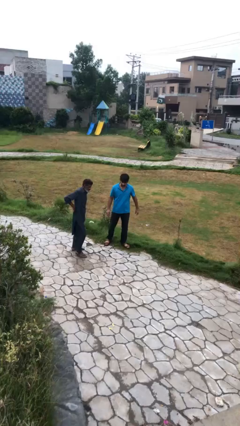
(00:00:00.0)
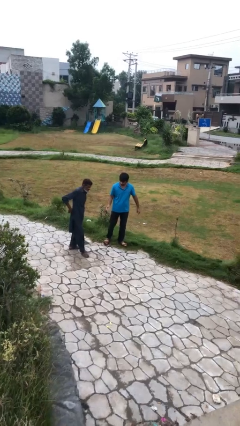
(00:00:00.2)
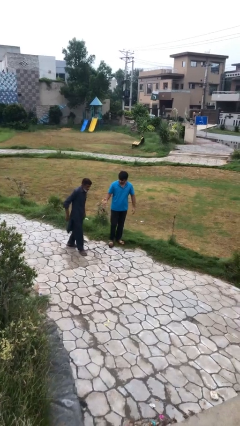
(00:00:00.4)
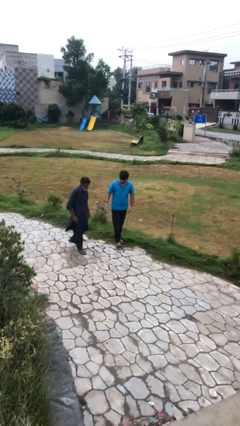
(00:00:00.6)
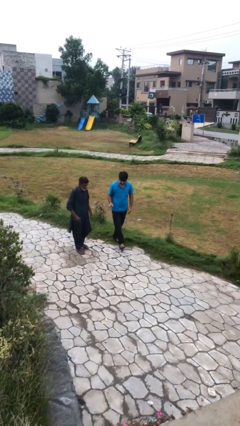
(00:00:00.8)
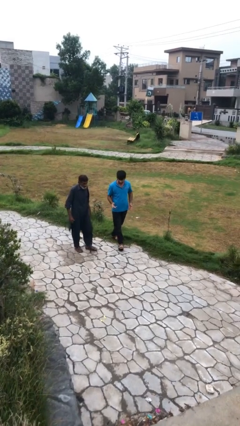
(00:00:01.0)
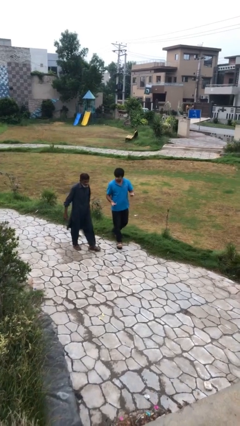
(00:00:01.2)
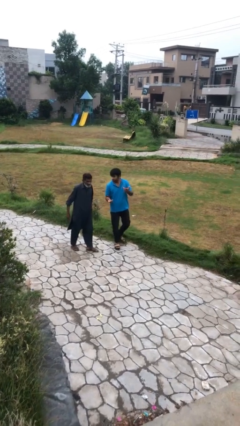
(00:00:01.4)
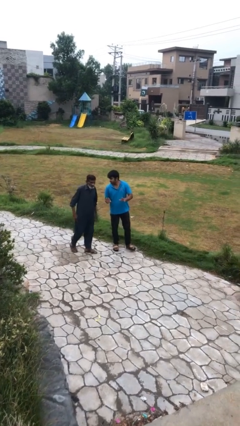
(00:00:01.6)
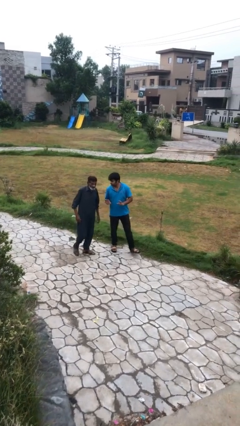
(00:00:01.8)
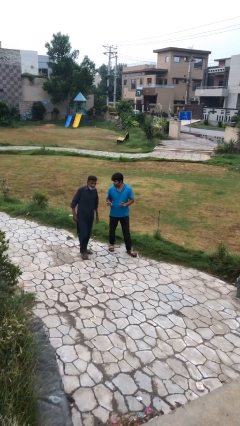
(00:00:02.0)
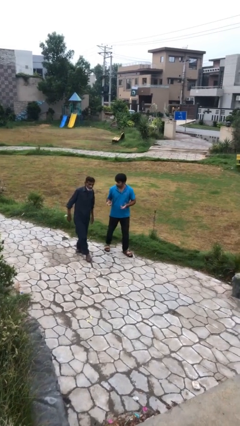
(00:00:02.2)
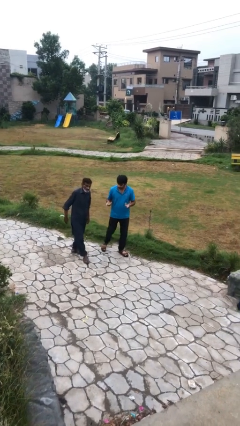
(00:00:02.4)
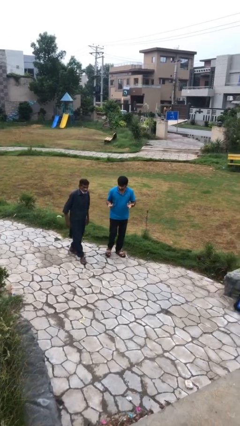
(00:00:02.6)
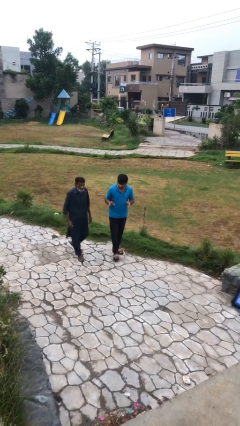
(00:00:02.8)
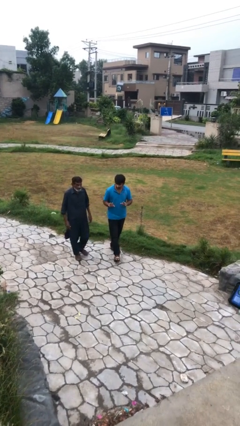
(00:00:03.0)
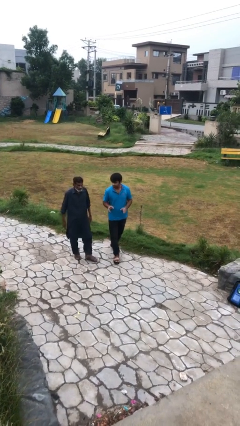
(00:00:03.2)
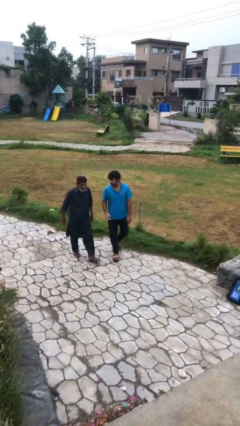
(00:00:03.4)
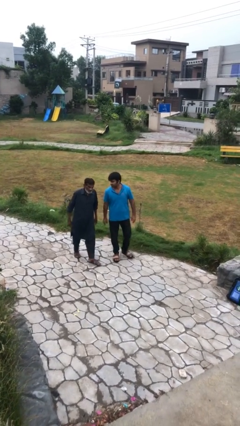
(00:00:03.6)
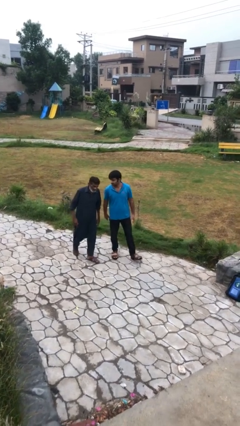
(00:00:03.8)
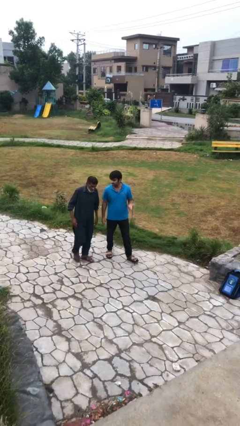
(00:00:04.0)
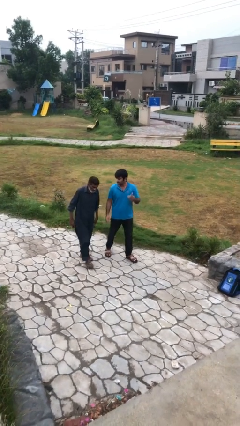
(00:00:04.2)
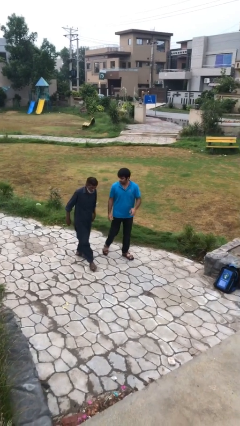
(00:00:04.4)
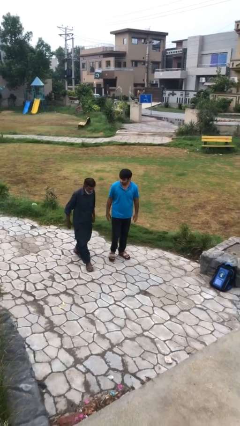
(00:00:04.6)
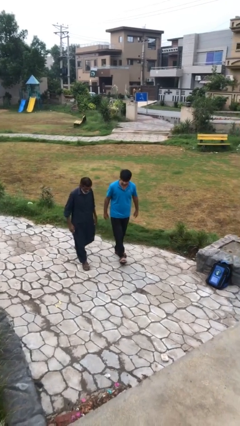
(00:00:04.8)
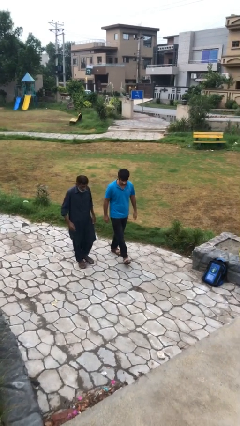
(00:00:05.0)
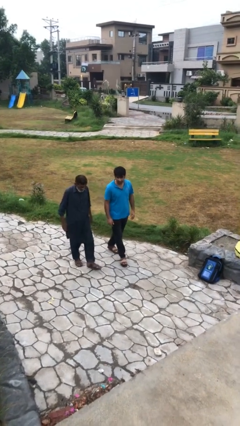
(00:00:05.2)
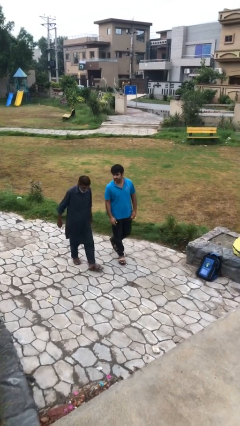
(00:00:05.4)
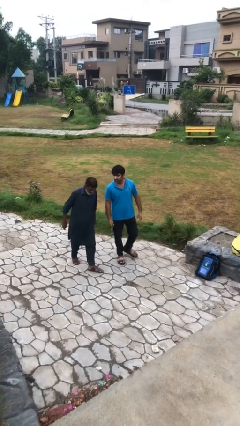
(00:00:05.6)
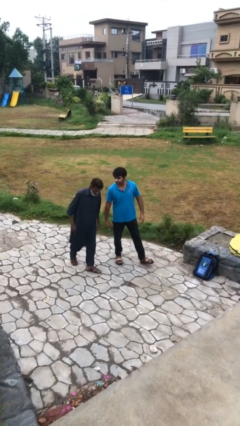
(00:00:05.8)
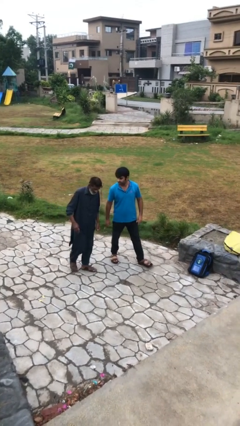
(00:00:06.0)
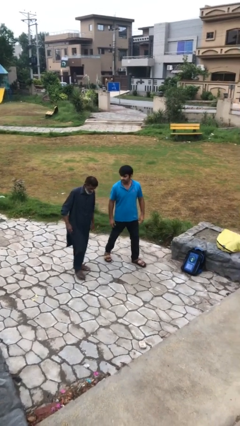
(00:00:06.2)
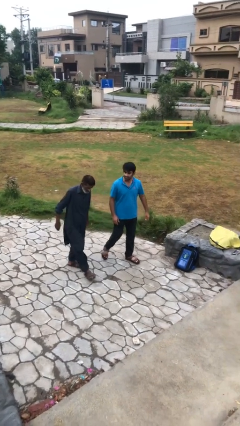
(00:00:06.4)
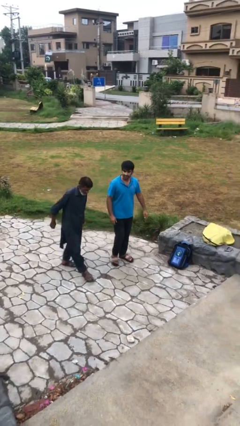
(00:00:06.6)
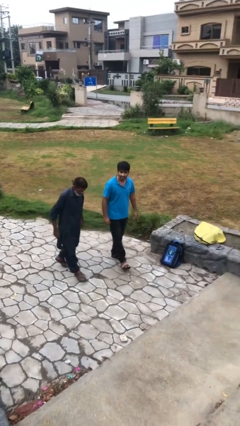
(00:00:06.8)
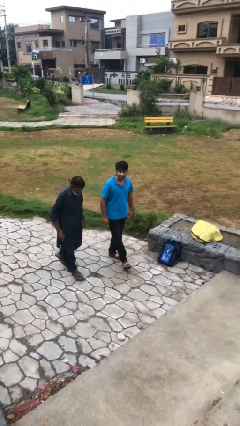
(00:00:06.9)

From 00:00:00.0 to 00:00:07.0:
person talks to person

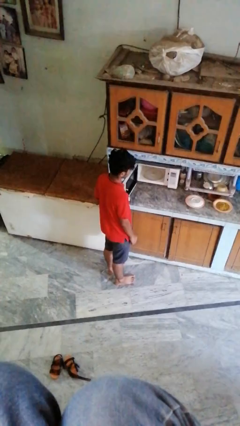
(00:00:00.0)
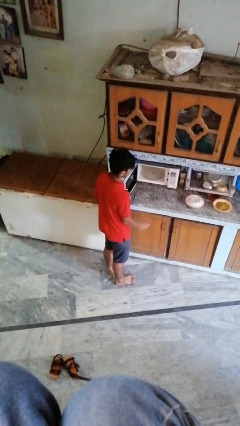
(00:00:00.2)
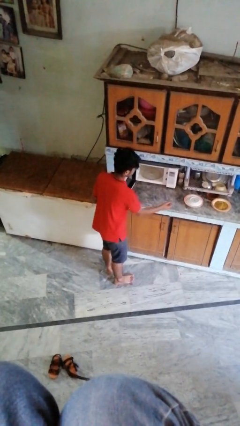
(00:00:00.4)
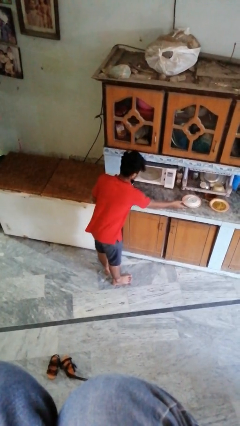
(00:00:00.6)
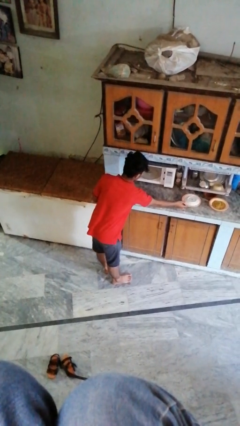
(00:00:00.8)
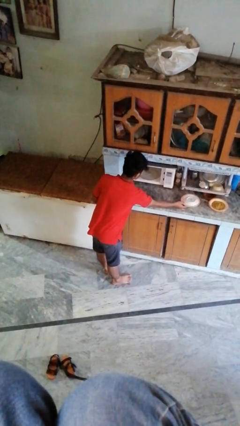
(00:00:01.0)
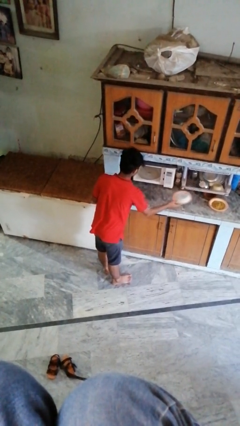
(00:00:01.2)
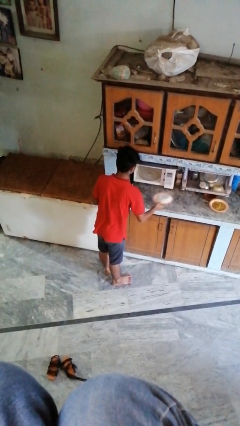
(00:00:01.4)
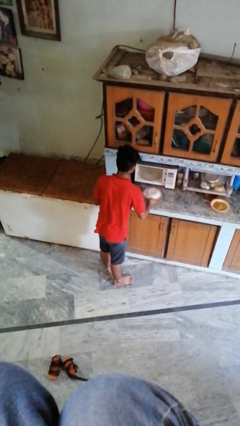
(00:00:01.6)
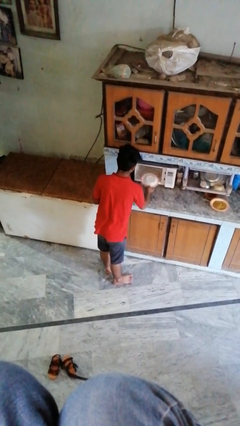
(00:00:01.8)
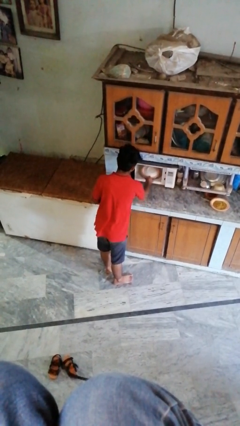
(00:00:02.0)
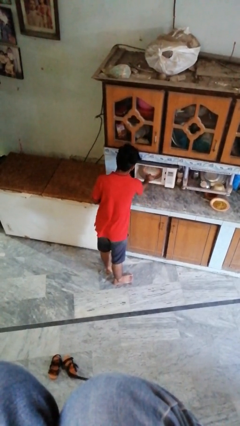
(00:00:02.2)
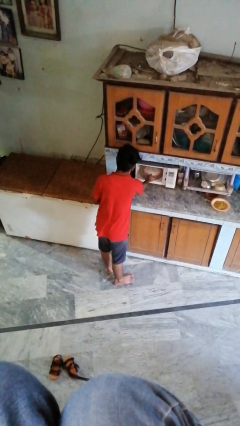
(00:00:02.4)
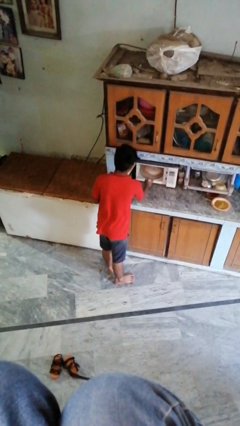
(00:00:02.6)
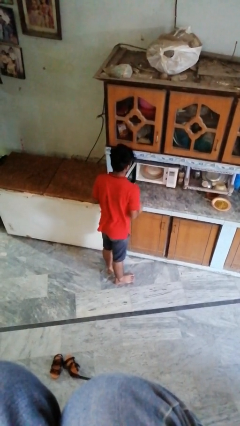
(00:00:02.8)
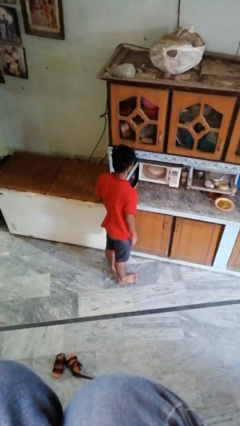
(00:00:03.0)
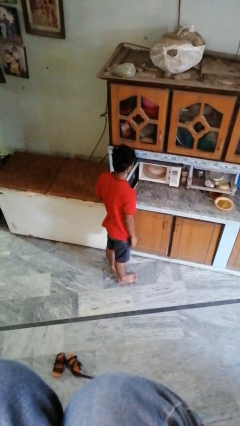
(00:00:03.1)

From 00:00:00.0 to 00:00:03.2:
person puts object into oven

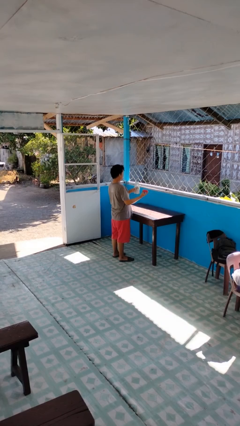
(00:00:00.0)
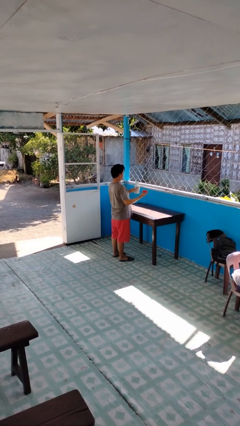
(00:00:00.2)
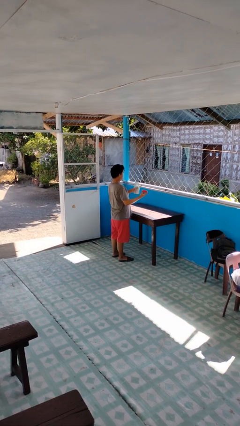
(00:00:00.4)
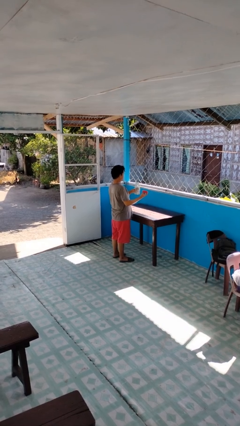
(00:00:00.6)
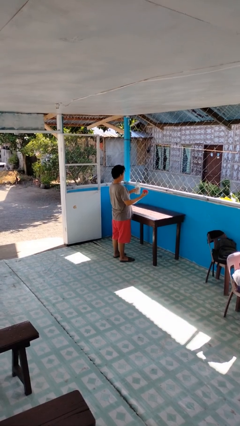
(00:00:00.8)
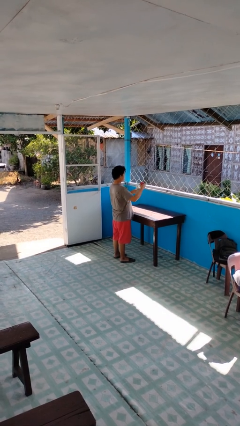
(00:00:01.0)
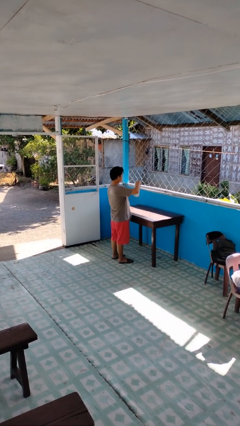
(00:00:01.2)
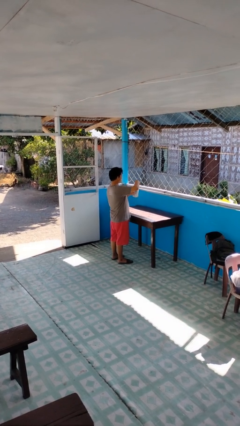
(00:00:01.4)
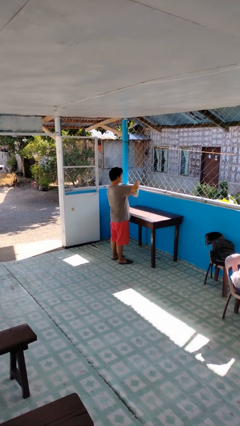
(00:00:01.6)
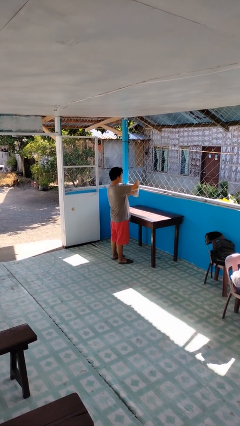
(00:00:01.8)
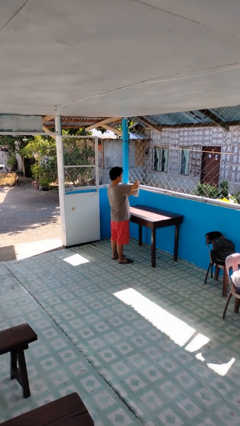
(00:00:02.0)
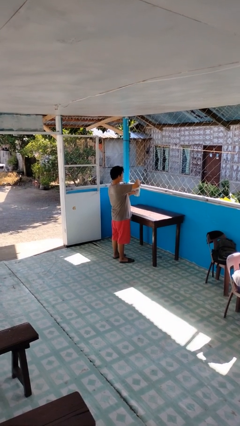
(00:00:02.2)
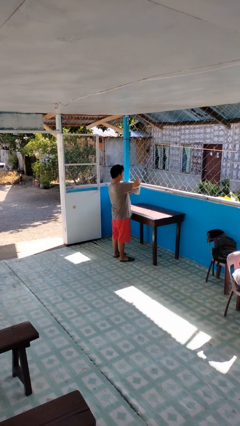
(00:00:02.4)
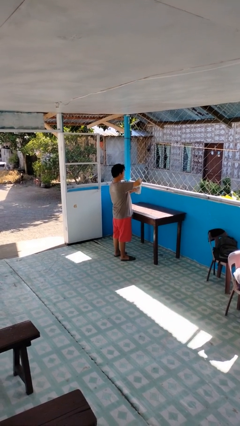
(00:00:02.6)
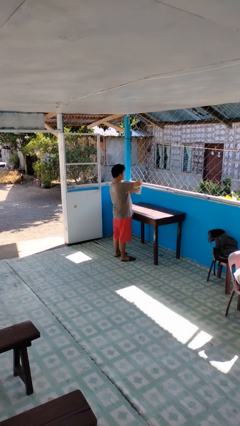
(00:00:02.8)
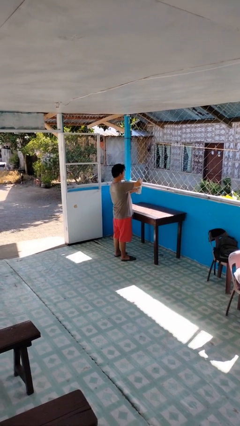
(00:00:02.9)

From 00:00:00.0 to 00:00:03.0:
person closes jar

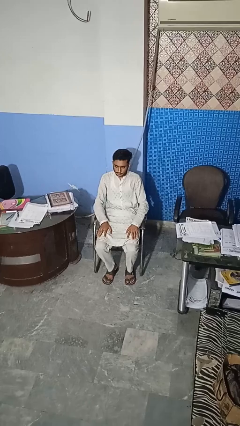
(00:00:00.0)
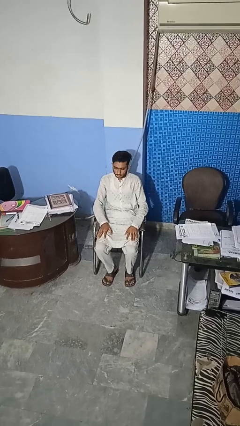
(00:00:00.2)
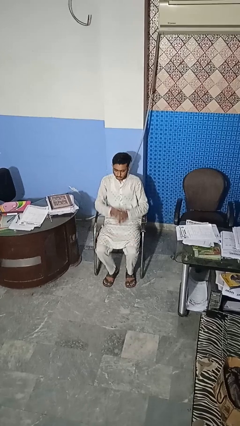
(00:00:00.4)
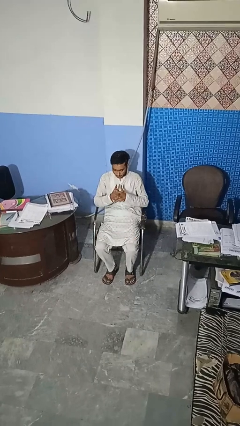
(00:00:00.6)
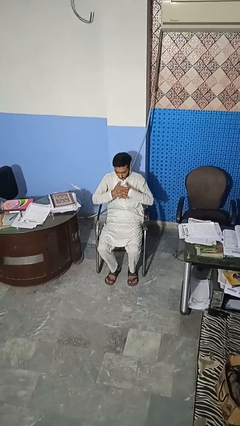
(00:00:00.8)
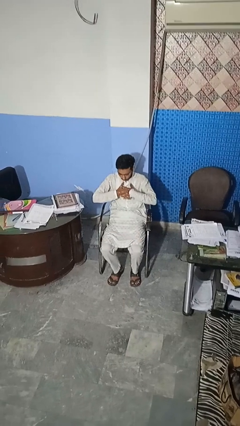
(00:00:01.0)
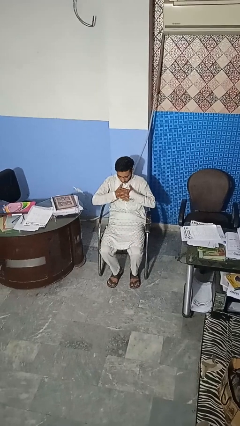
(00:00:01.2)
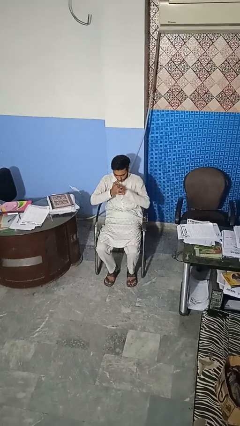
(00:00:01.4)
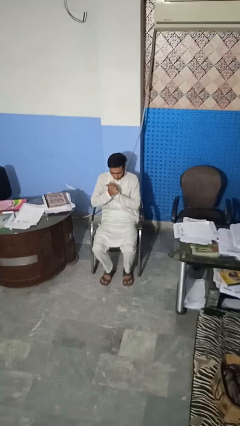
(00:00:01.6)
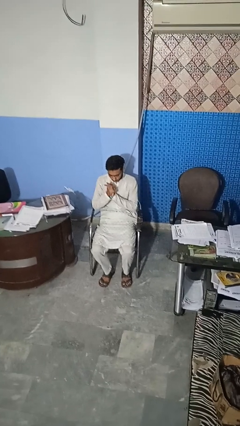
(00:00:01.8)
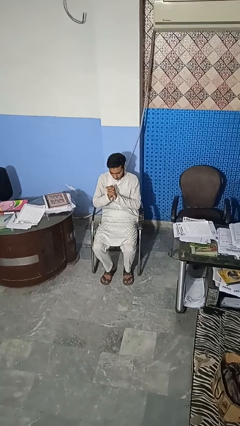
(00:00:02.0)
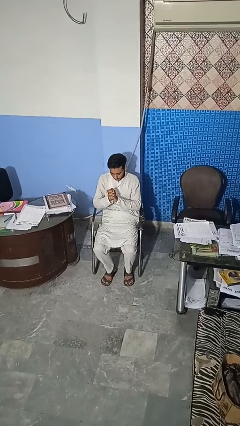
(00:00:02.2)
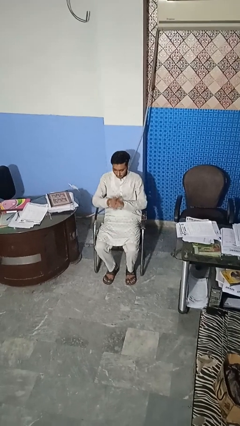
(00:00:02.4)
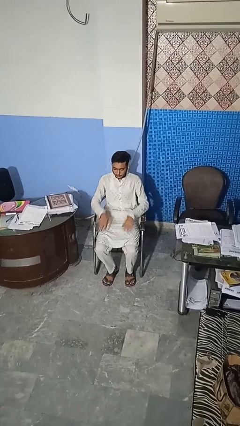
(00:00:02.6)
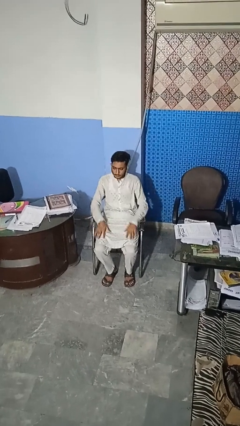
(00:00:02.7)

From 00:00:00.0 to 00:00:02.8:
person cracks knuckles

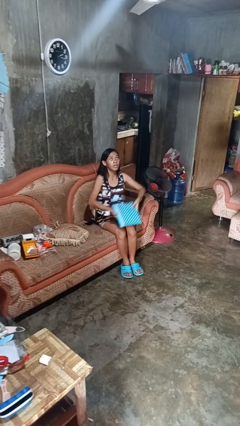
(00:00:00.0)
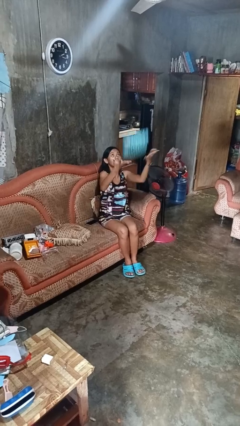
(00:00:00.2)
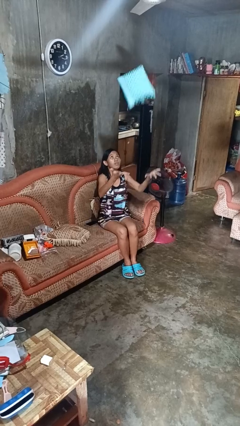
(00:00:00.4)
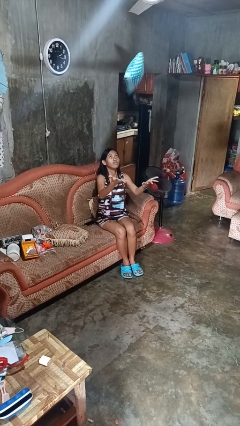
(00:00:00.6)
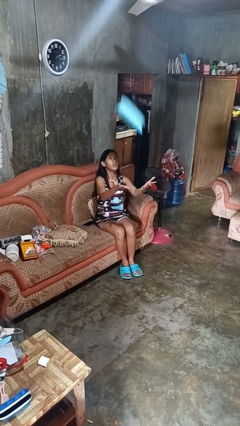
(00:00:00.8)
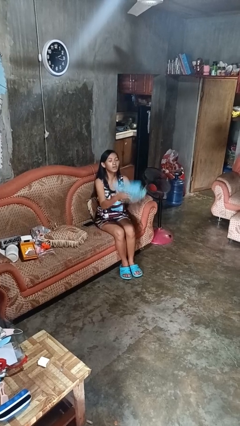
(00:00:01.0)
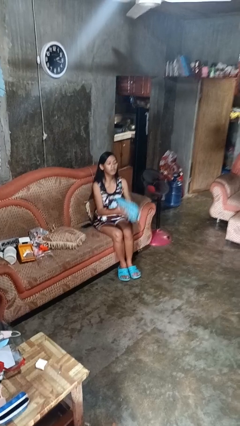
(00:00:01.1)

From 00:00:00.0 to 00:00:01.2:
person drops object
